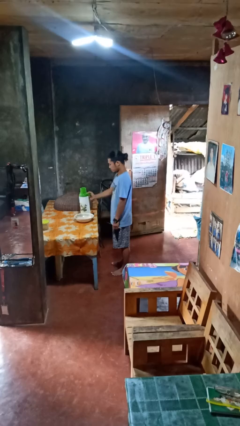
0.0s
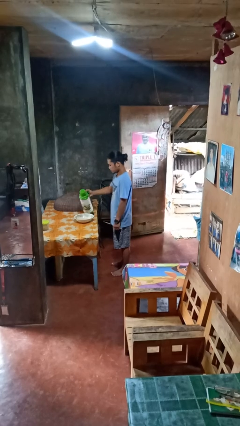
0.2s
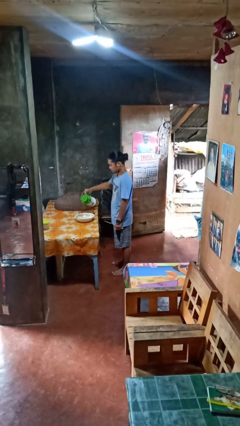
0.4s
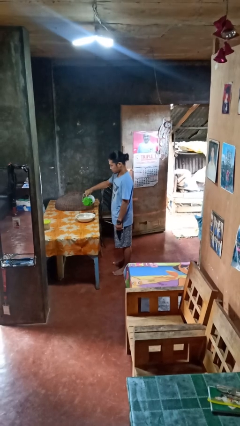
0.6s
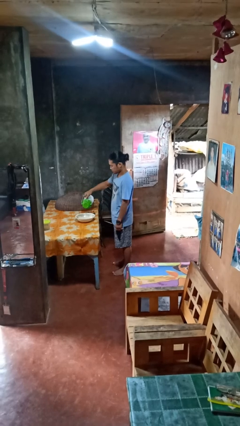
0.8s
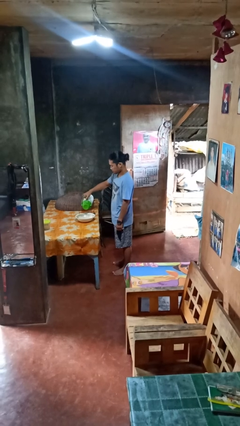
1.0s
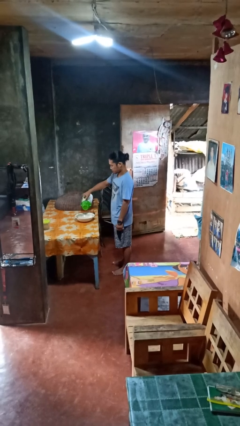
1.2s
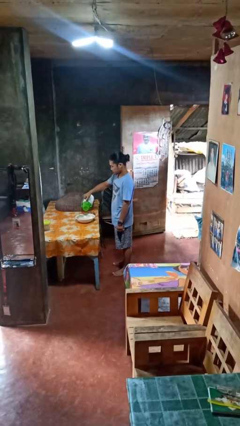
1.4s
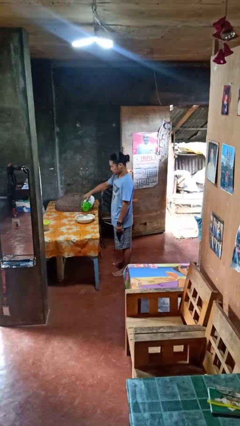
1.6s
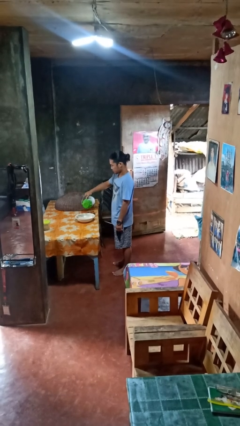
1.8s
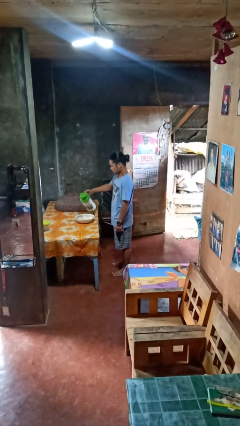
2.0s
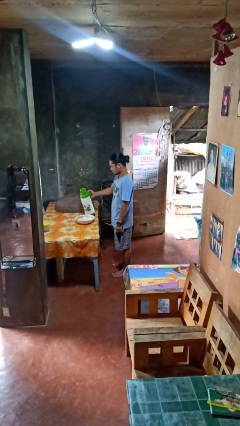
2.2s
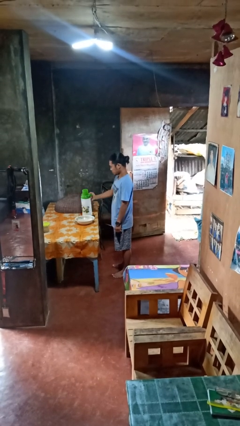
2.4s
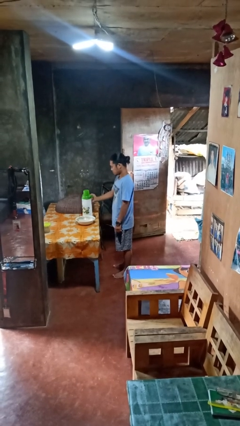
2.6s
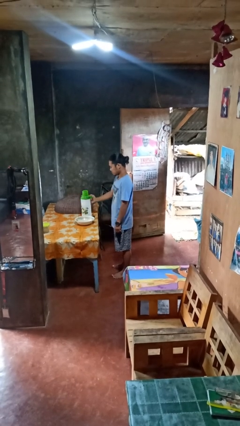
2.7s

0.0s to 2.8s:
person pours into bowl

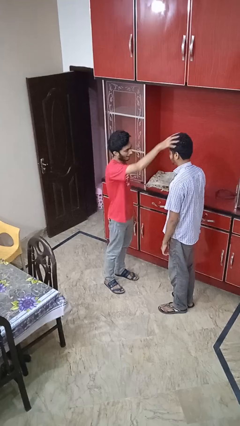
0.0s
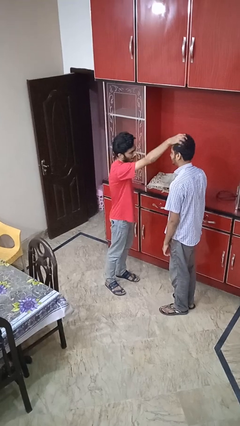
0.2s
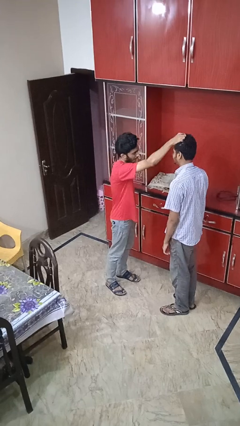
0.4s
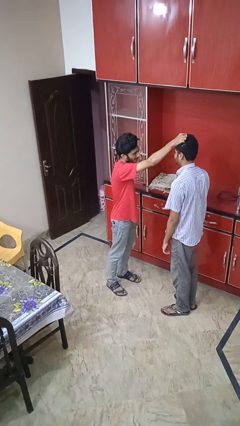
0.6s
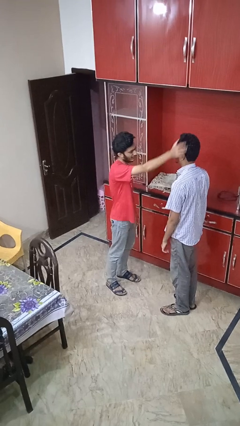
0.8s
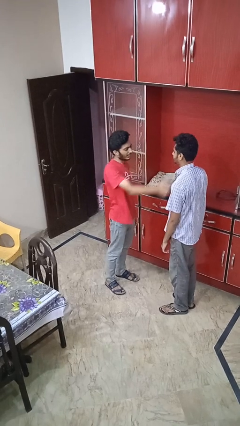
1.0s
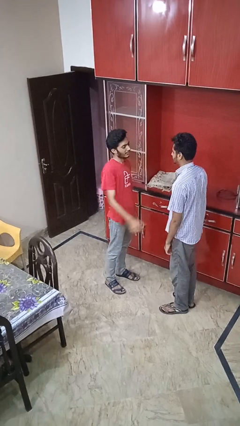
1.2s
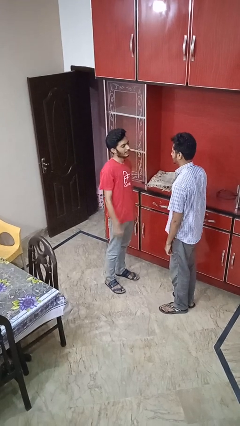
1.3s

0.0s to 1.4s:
person grabs person by hair

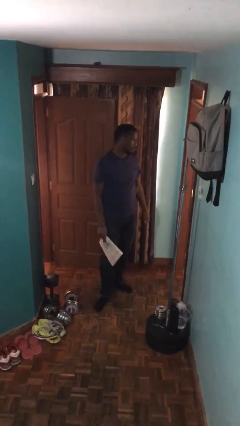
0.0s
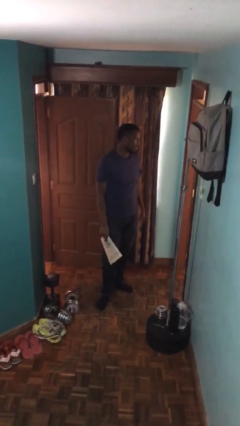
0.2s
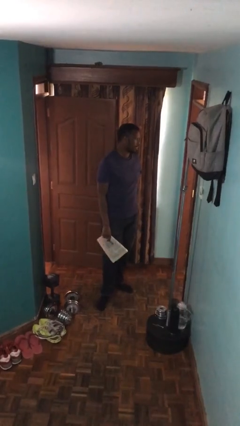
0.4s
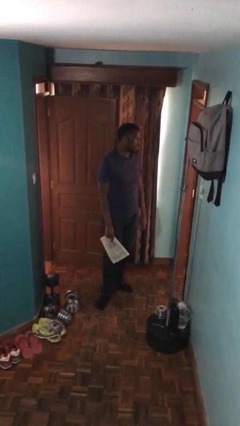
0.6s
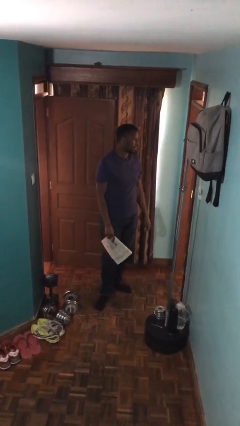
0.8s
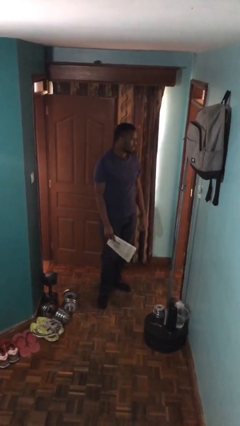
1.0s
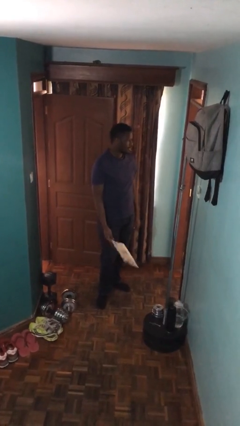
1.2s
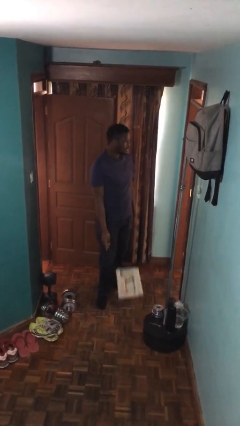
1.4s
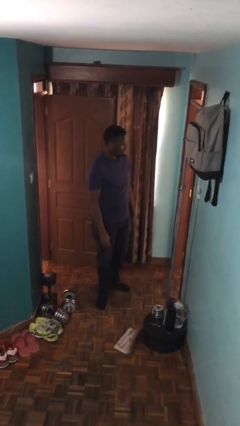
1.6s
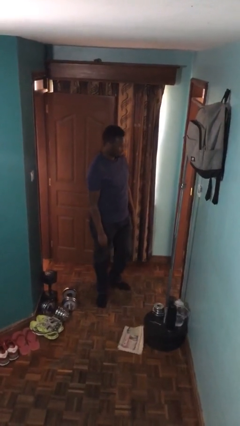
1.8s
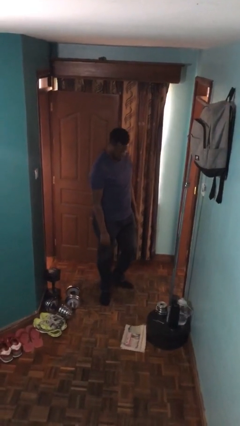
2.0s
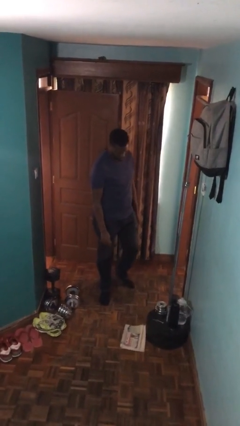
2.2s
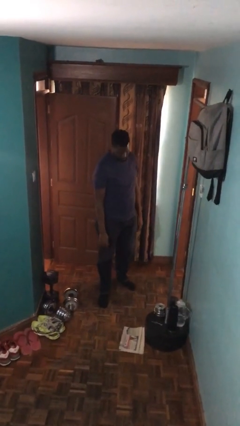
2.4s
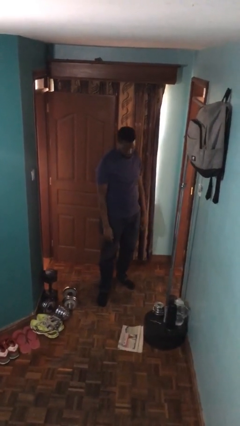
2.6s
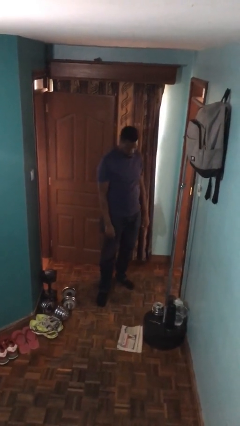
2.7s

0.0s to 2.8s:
person drops object

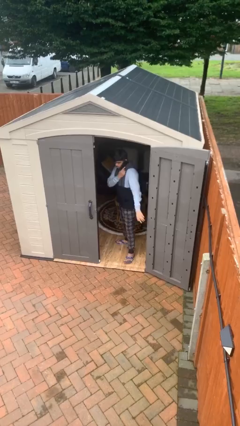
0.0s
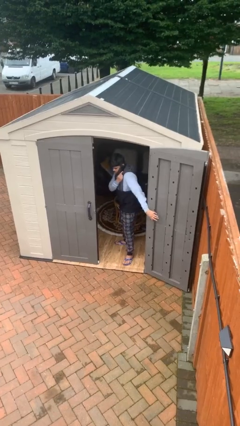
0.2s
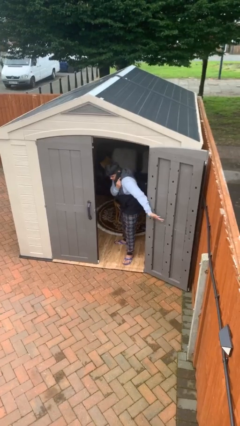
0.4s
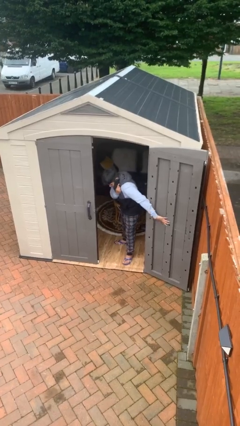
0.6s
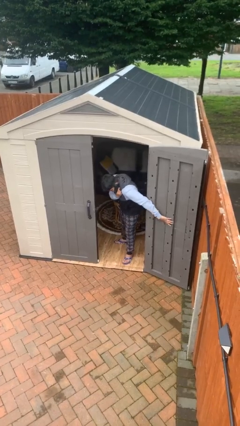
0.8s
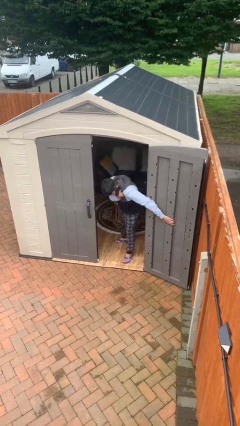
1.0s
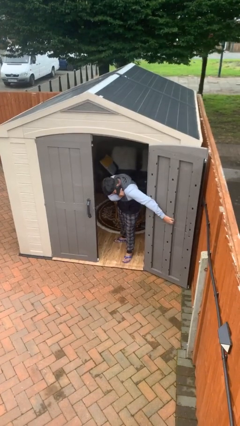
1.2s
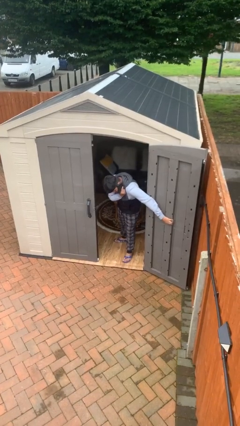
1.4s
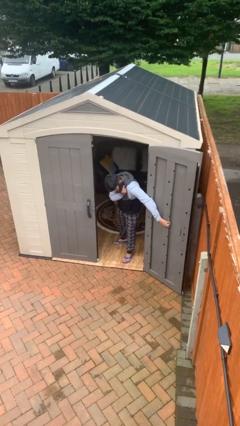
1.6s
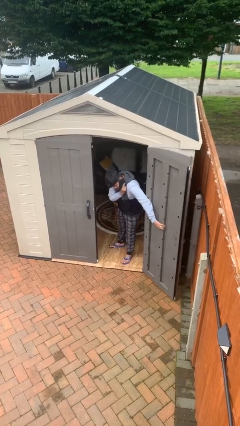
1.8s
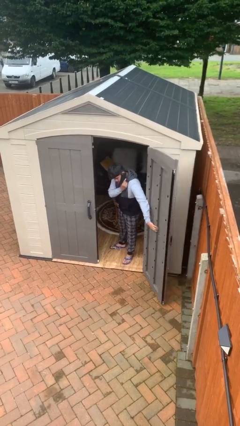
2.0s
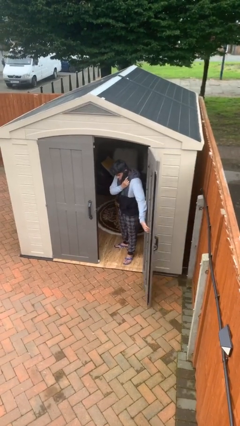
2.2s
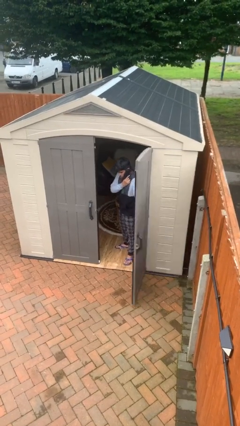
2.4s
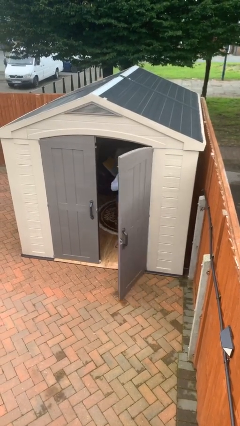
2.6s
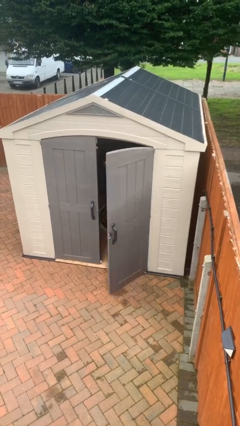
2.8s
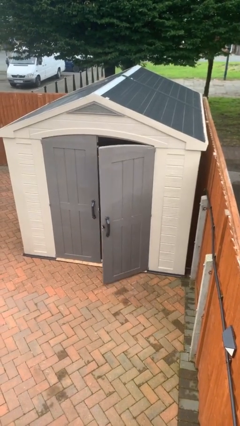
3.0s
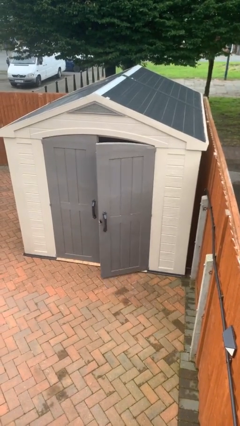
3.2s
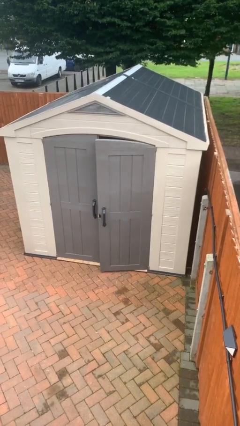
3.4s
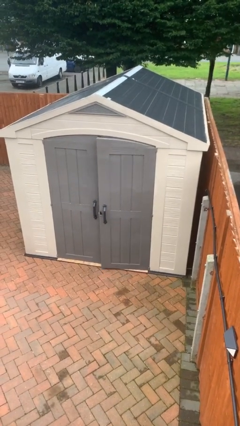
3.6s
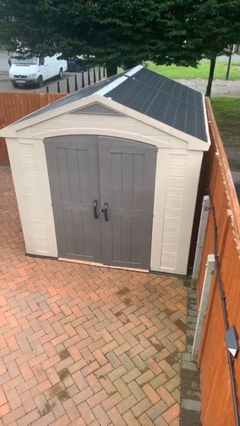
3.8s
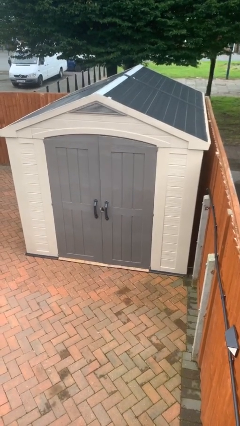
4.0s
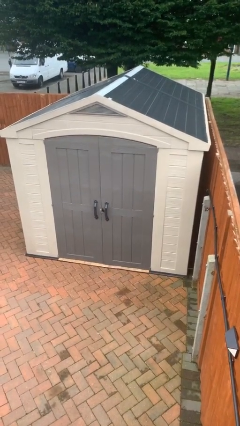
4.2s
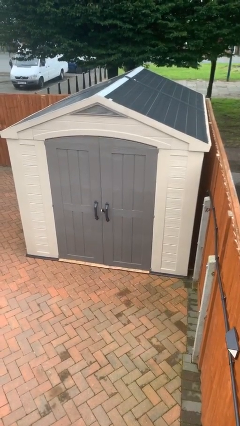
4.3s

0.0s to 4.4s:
person closes facility door

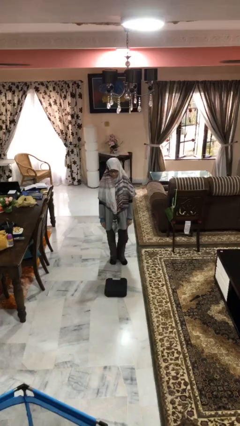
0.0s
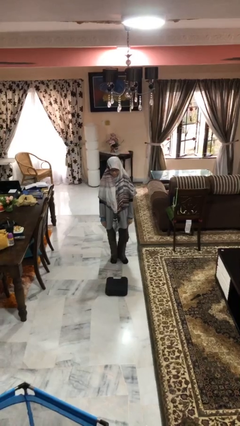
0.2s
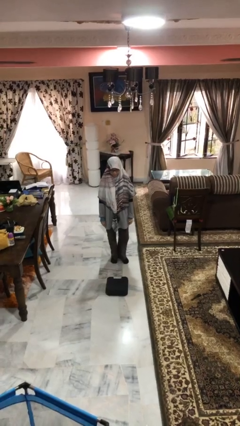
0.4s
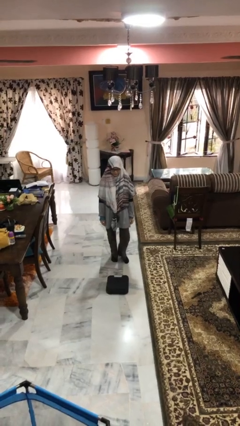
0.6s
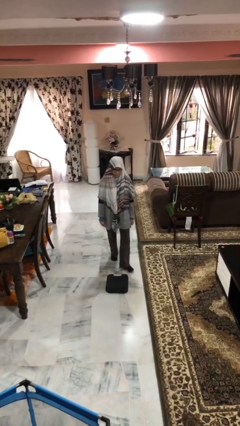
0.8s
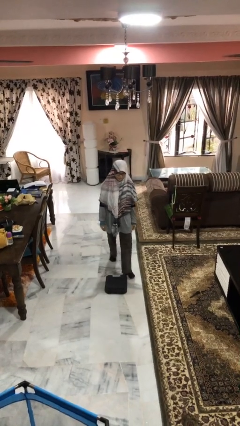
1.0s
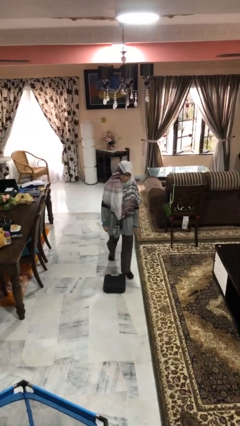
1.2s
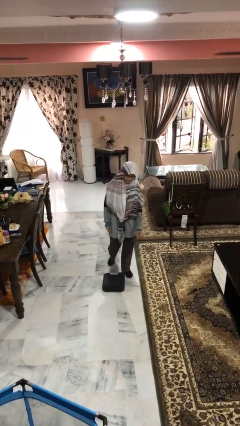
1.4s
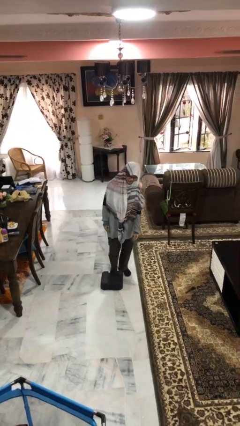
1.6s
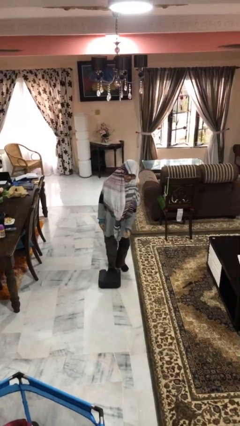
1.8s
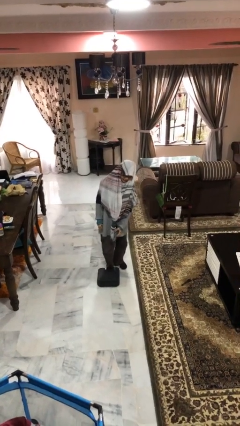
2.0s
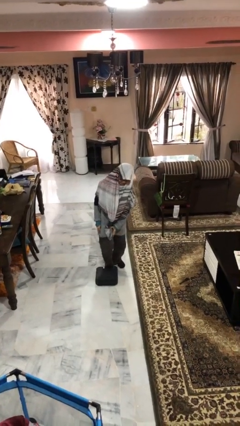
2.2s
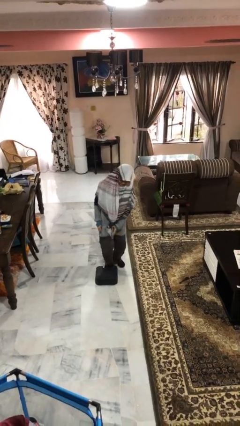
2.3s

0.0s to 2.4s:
person trips on object on floor

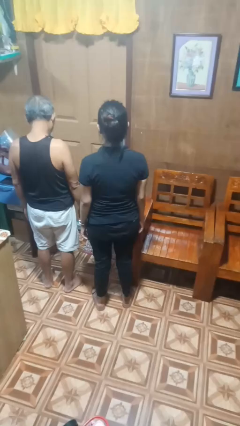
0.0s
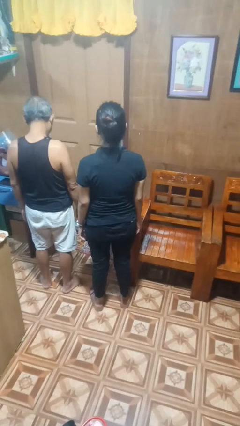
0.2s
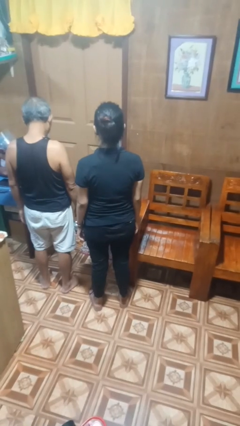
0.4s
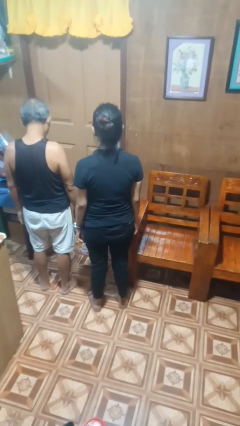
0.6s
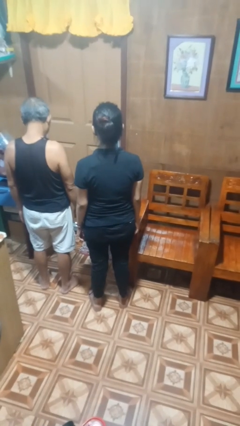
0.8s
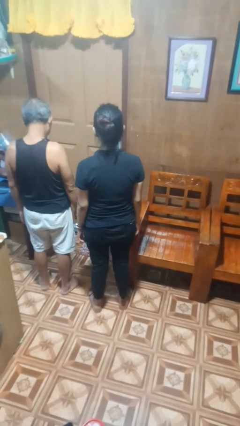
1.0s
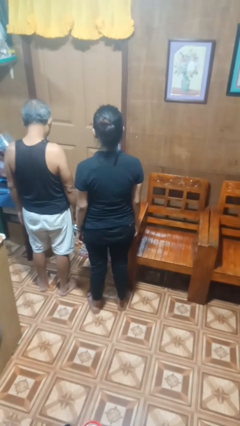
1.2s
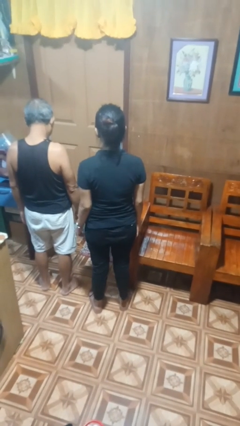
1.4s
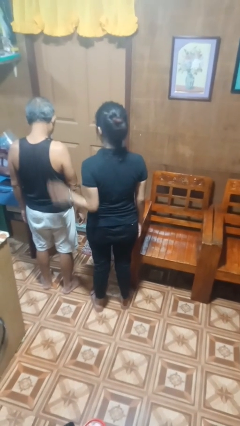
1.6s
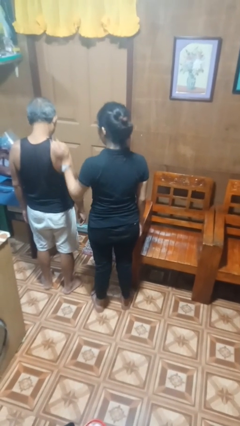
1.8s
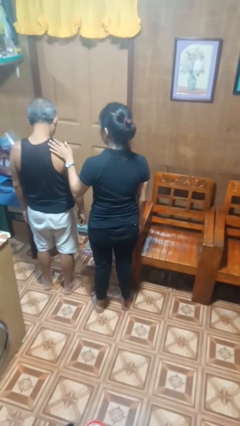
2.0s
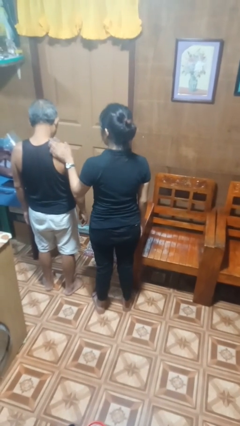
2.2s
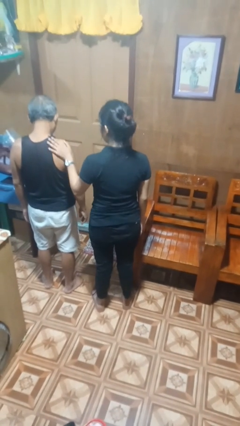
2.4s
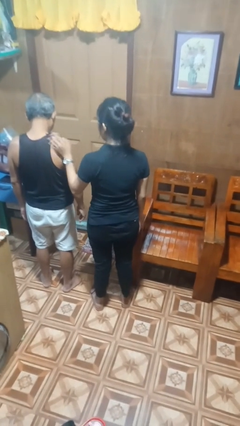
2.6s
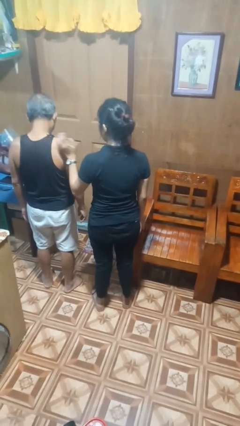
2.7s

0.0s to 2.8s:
person pounds shoulders of person

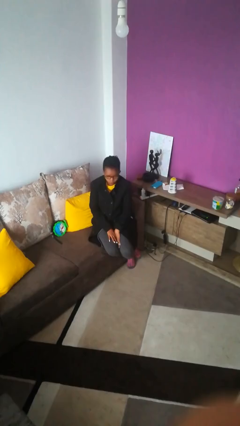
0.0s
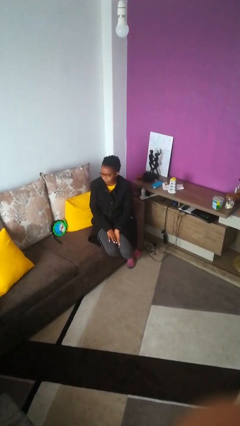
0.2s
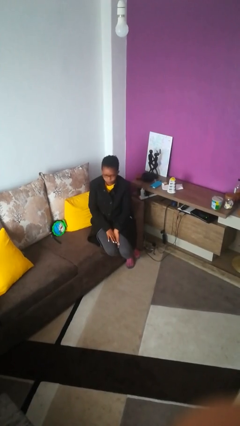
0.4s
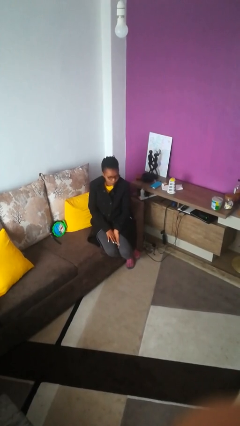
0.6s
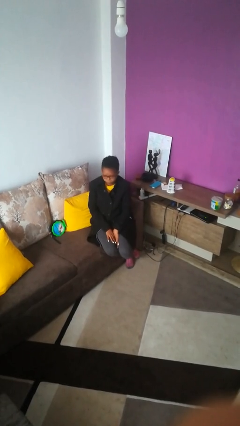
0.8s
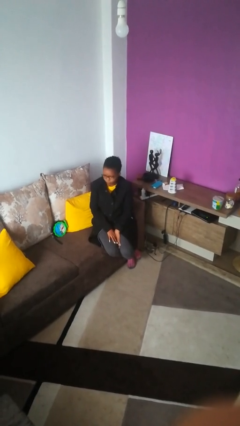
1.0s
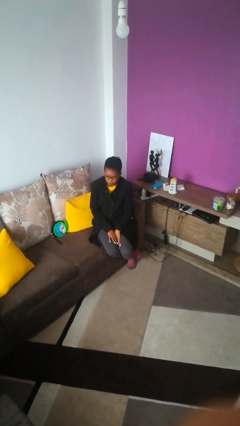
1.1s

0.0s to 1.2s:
person shakes head
